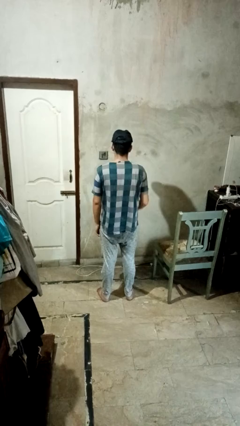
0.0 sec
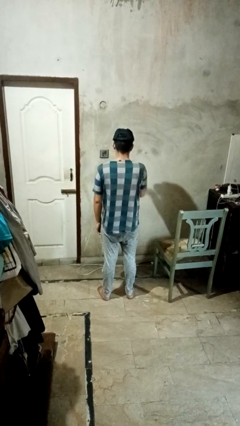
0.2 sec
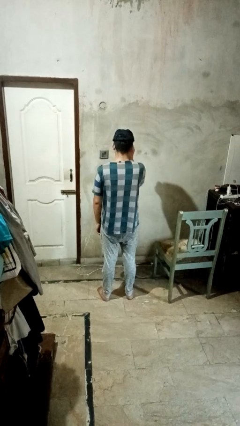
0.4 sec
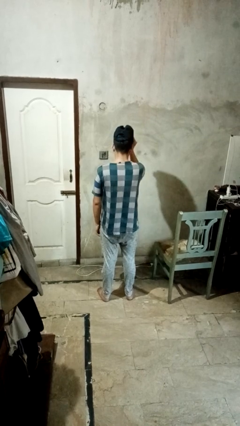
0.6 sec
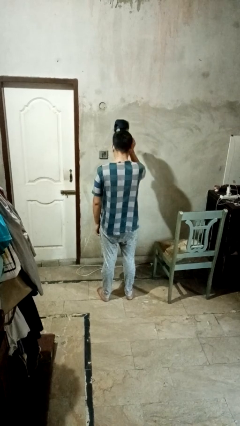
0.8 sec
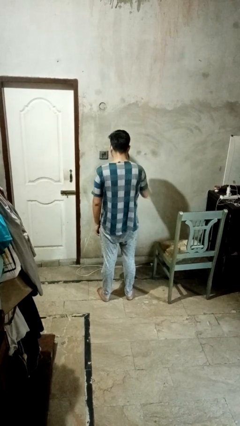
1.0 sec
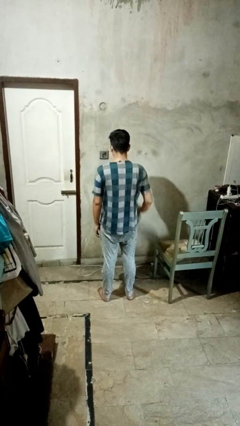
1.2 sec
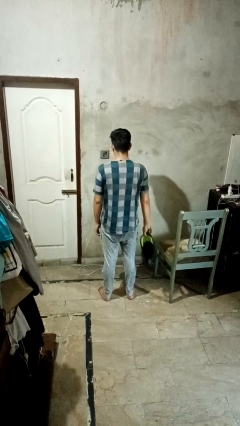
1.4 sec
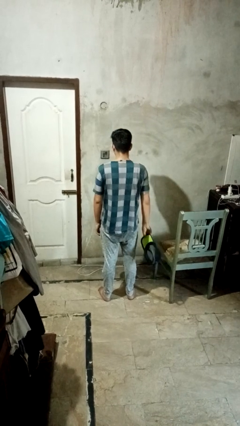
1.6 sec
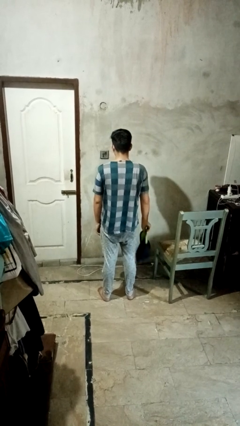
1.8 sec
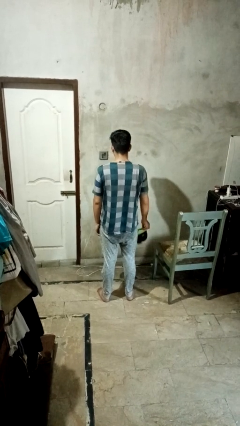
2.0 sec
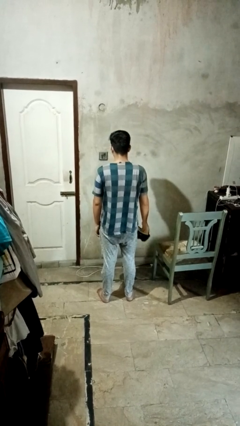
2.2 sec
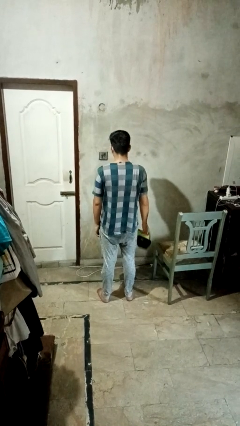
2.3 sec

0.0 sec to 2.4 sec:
person takes off hat

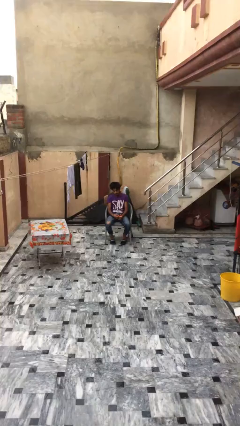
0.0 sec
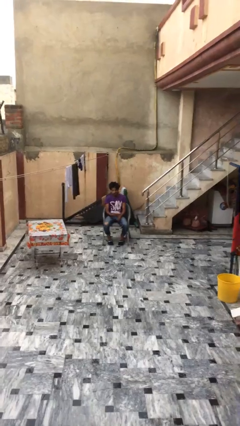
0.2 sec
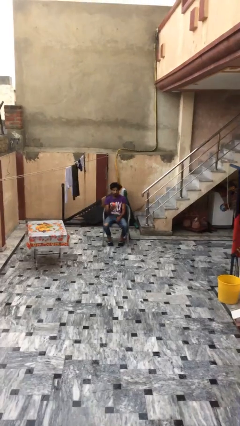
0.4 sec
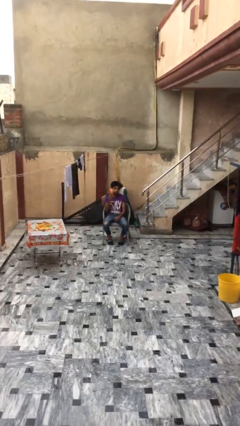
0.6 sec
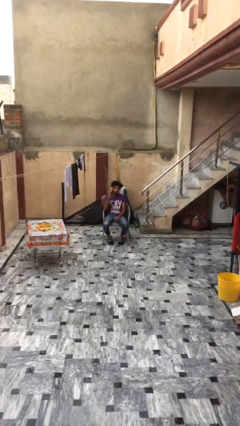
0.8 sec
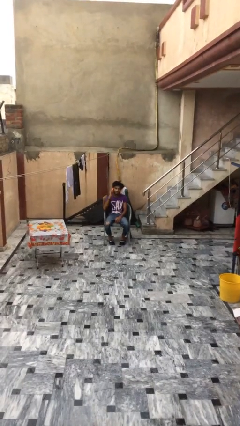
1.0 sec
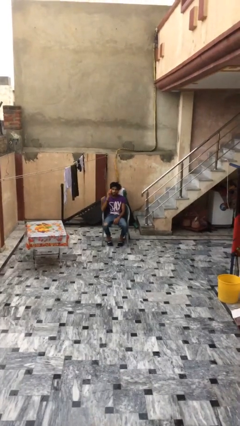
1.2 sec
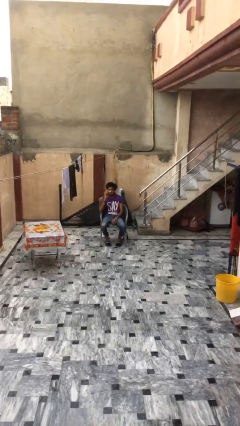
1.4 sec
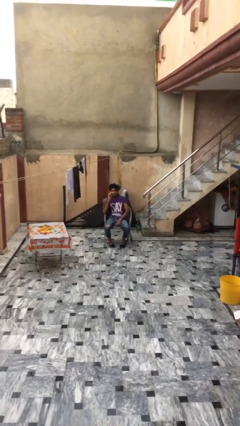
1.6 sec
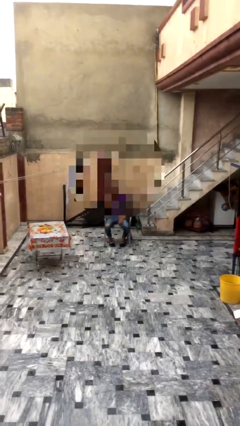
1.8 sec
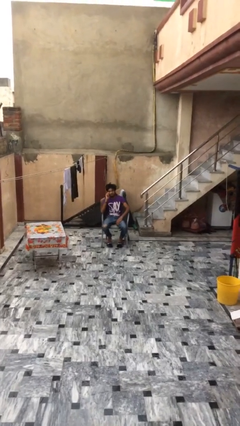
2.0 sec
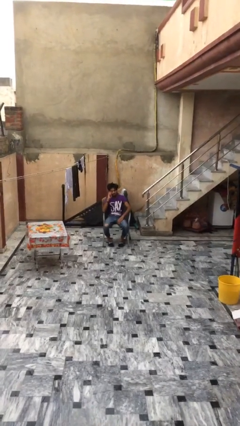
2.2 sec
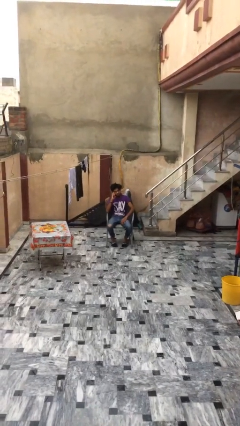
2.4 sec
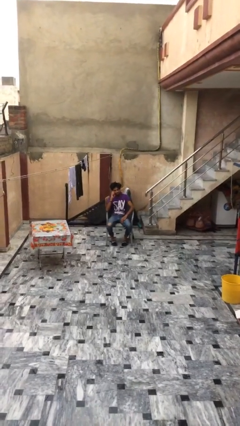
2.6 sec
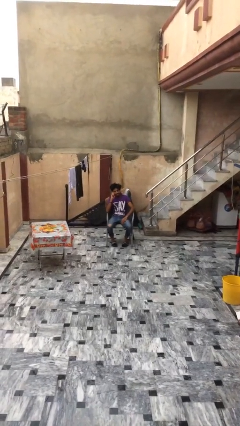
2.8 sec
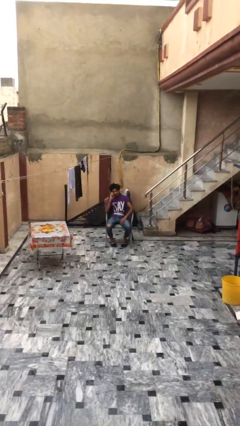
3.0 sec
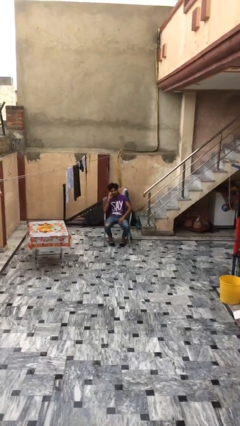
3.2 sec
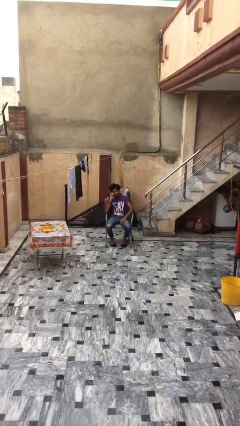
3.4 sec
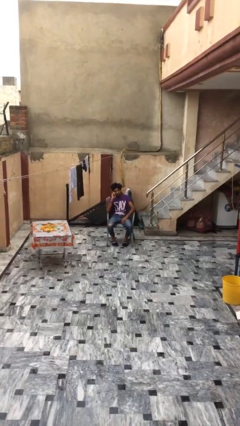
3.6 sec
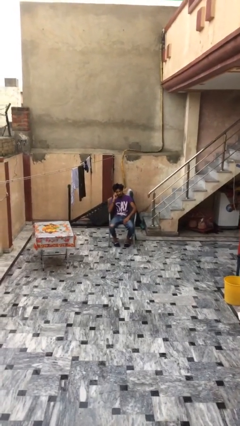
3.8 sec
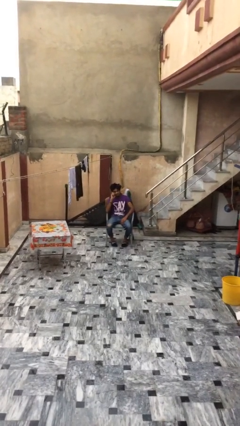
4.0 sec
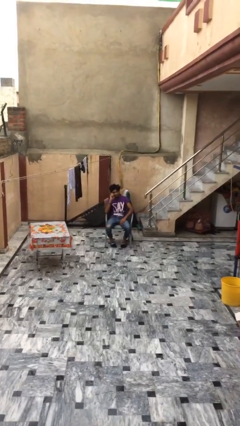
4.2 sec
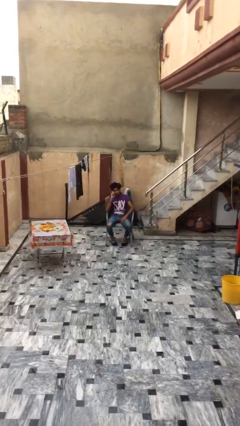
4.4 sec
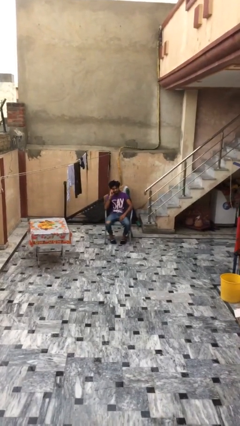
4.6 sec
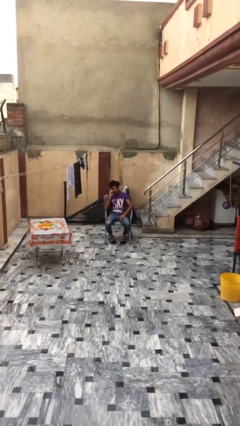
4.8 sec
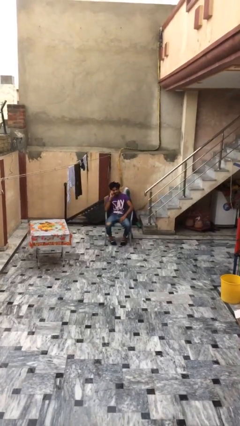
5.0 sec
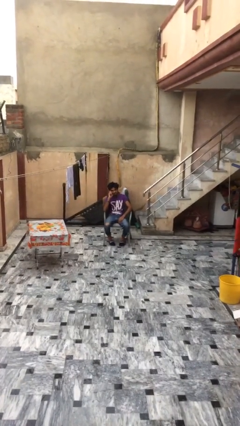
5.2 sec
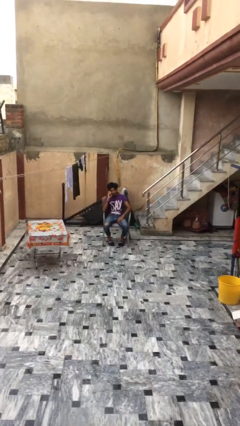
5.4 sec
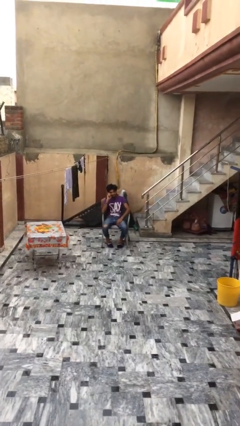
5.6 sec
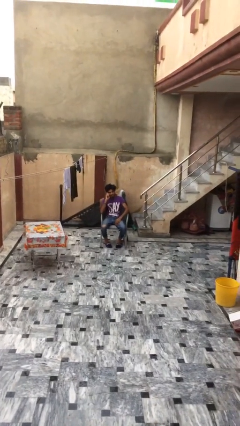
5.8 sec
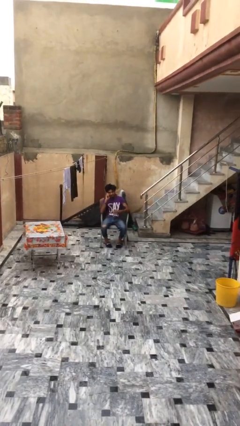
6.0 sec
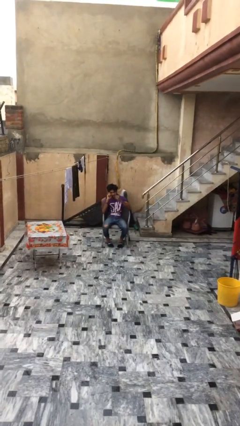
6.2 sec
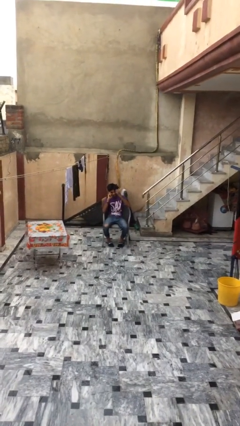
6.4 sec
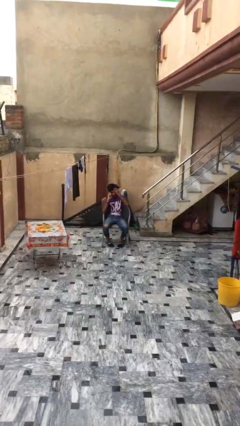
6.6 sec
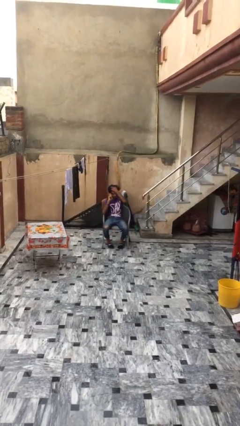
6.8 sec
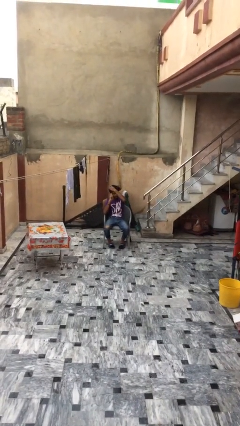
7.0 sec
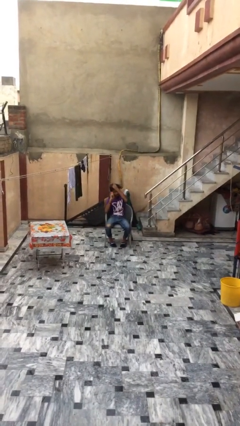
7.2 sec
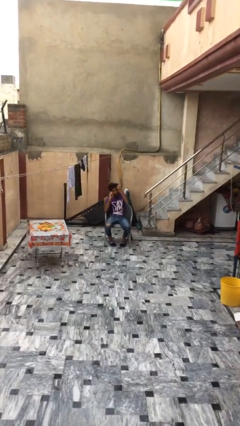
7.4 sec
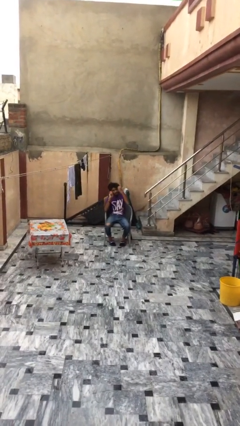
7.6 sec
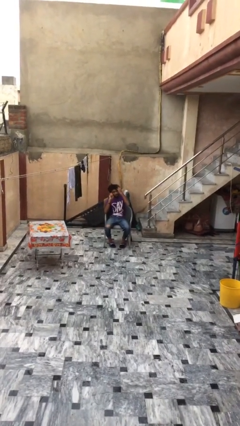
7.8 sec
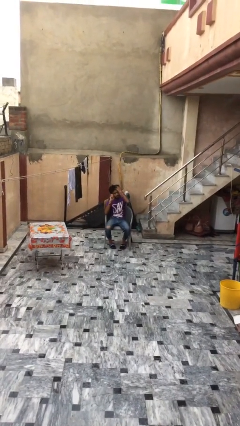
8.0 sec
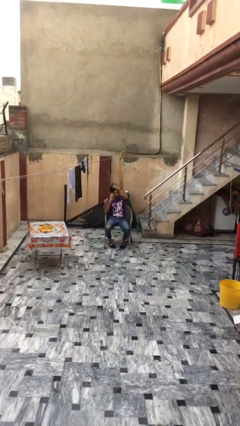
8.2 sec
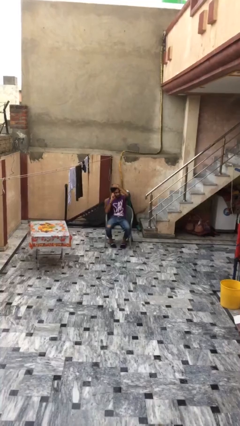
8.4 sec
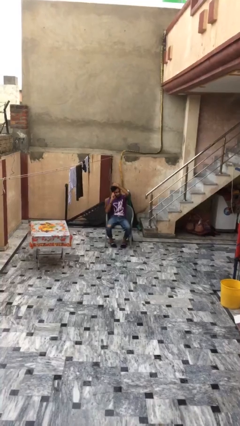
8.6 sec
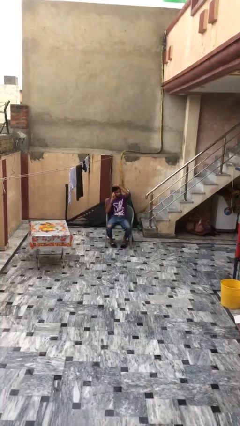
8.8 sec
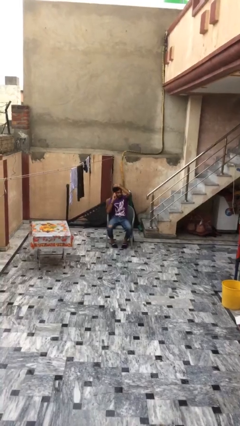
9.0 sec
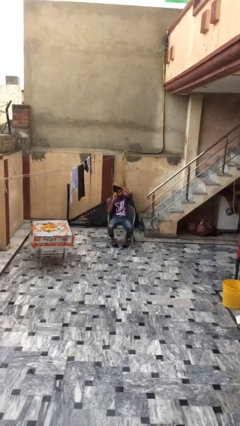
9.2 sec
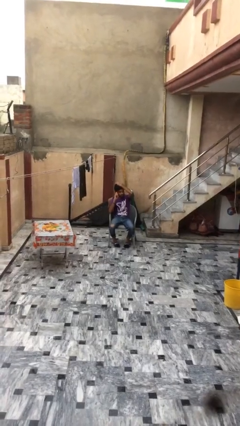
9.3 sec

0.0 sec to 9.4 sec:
person talks on phone

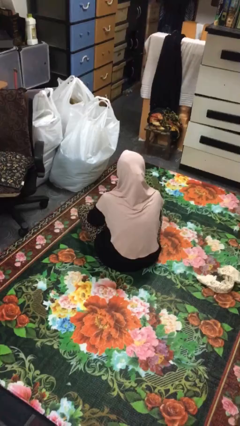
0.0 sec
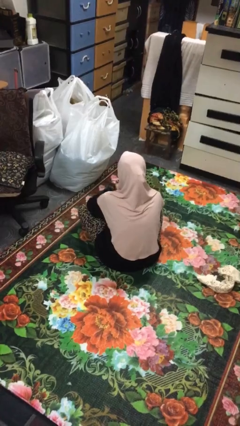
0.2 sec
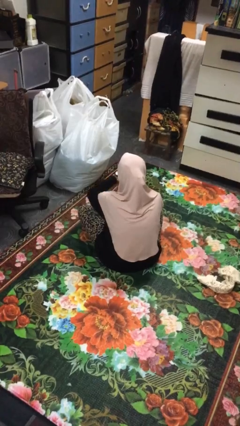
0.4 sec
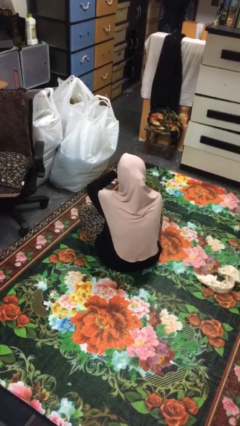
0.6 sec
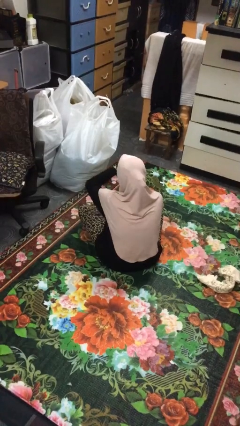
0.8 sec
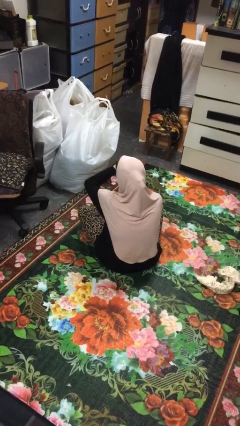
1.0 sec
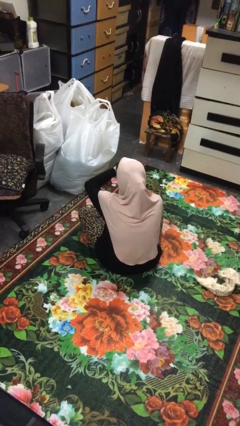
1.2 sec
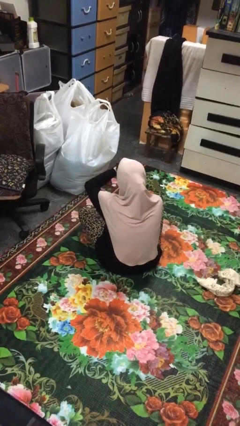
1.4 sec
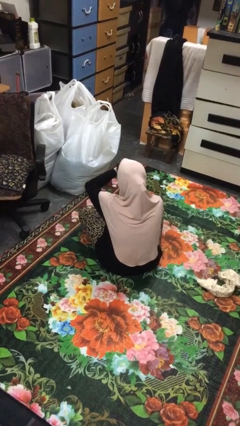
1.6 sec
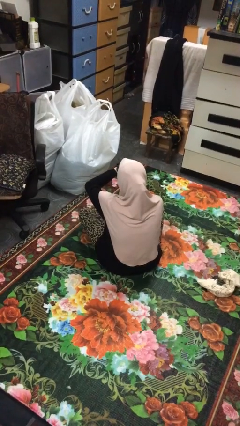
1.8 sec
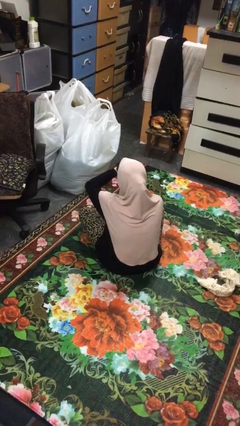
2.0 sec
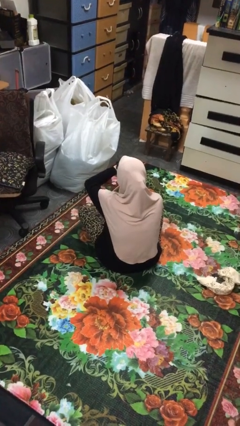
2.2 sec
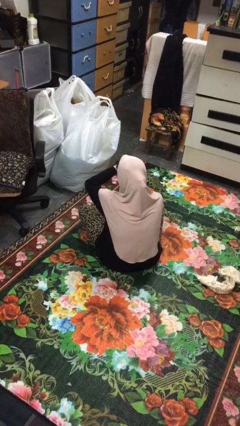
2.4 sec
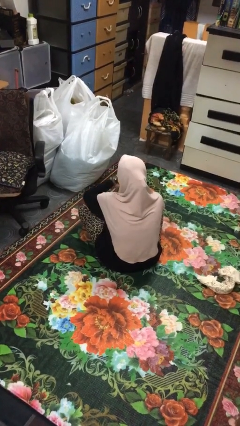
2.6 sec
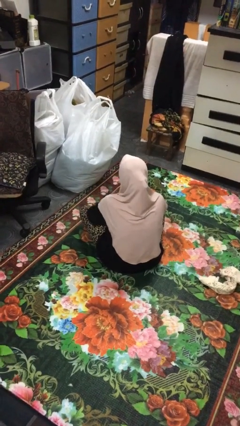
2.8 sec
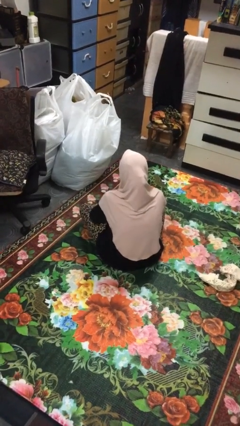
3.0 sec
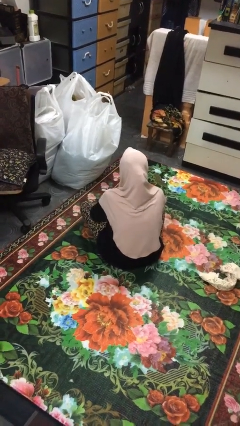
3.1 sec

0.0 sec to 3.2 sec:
person looks at wristwatch

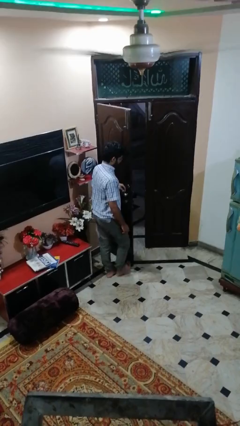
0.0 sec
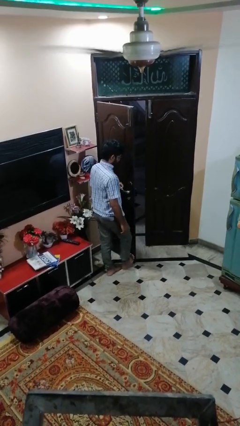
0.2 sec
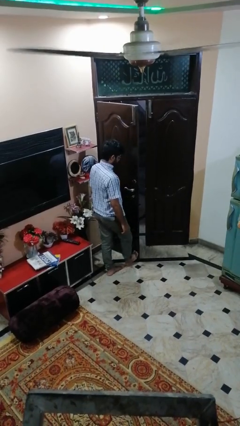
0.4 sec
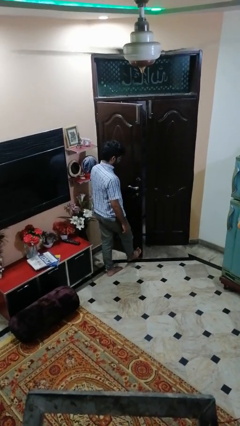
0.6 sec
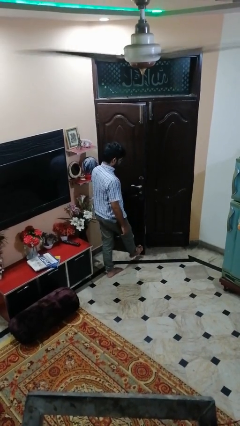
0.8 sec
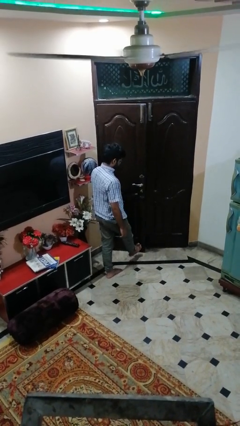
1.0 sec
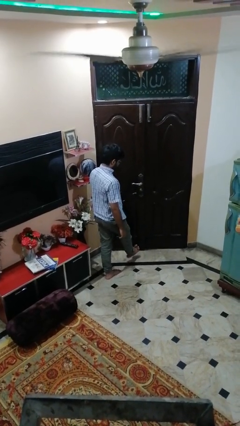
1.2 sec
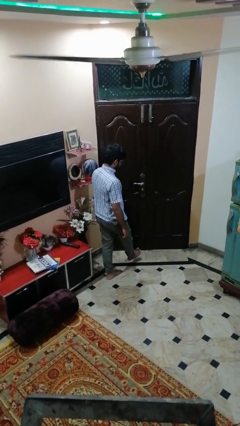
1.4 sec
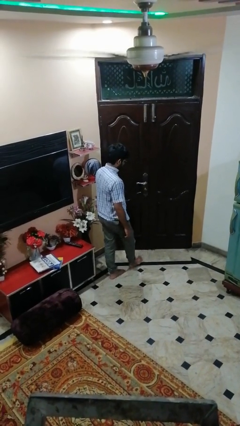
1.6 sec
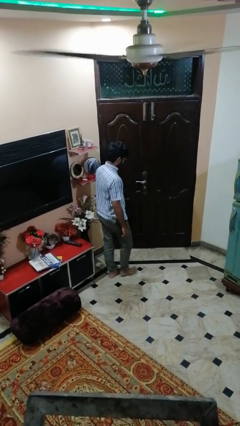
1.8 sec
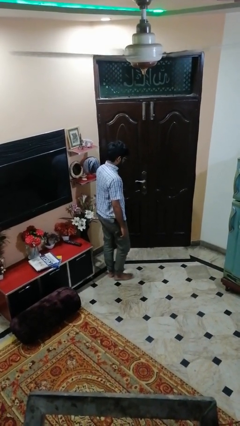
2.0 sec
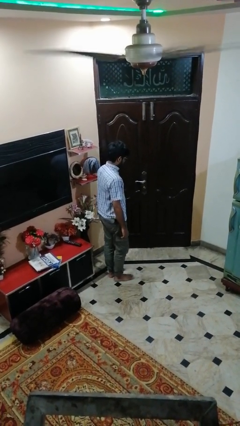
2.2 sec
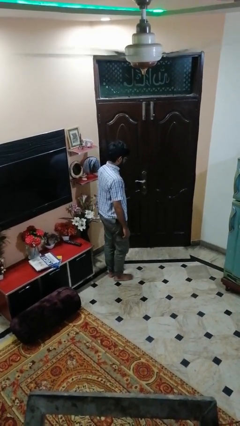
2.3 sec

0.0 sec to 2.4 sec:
person closes door with foot

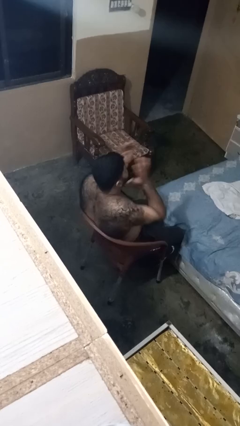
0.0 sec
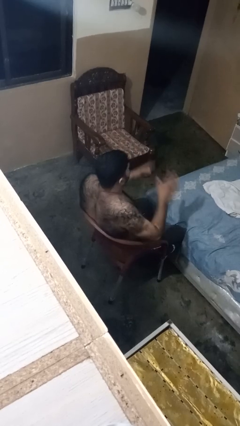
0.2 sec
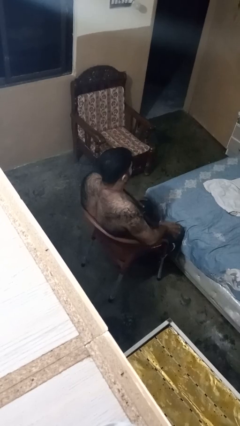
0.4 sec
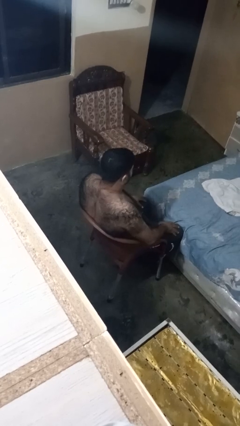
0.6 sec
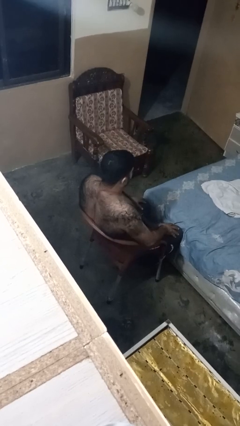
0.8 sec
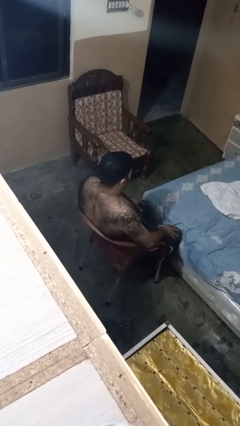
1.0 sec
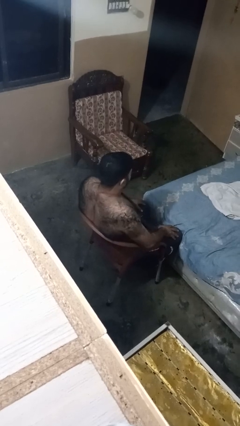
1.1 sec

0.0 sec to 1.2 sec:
person covers face with hands
